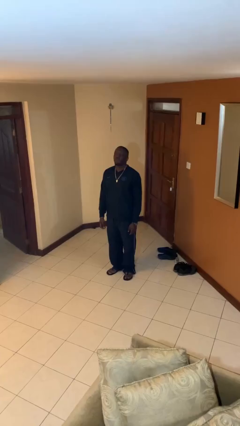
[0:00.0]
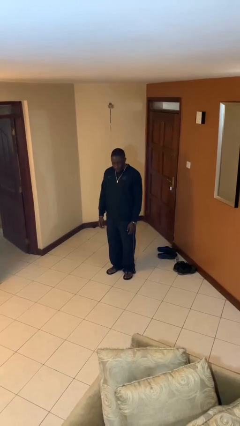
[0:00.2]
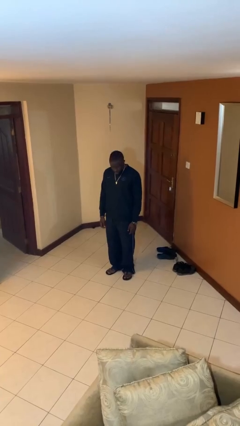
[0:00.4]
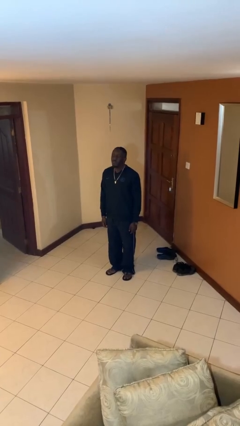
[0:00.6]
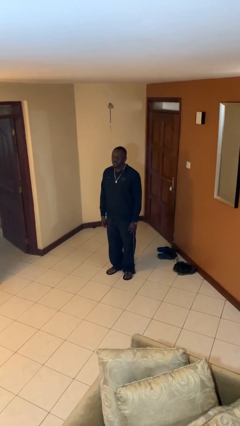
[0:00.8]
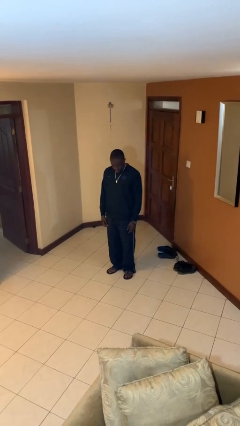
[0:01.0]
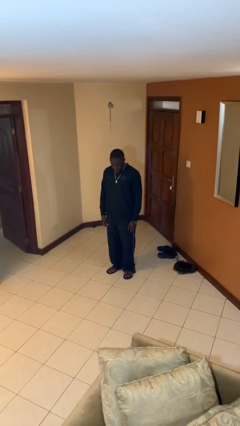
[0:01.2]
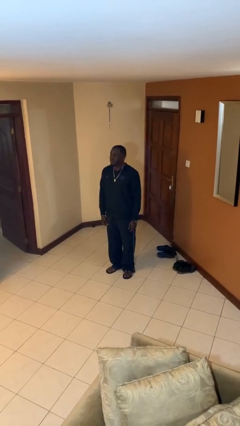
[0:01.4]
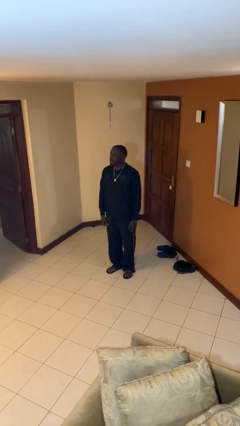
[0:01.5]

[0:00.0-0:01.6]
person nods head

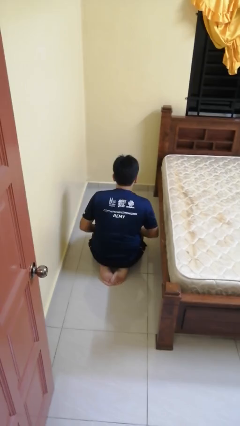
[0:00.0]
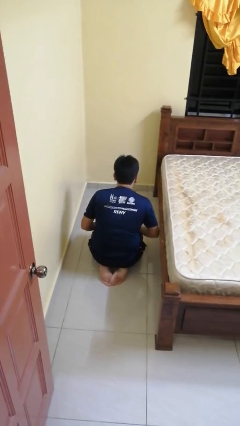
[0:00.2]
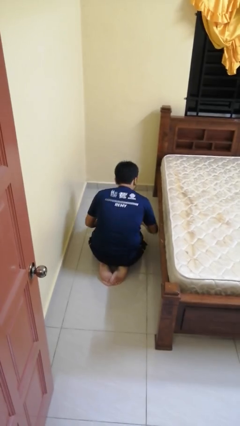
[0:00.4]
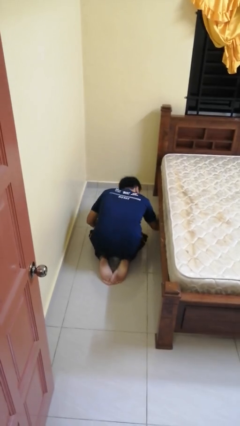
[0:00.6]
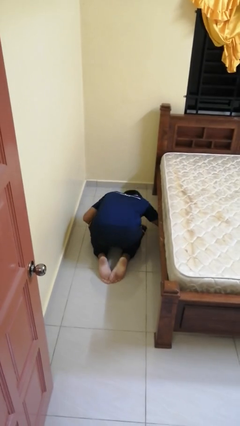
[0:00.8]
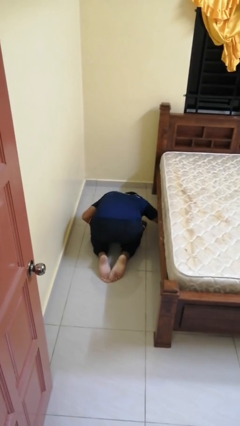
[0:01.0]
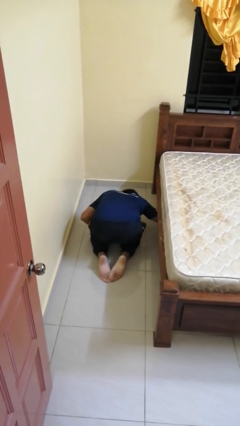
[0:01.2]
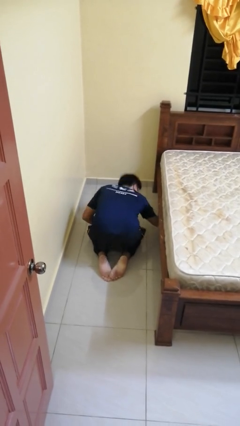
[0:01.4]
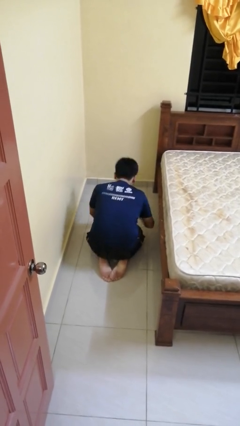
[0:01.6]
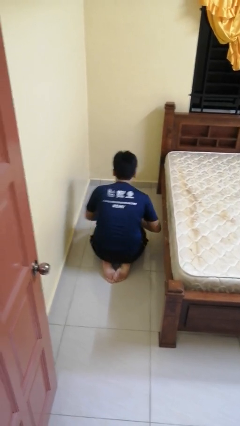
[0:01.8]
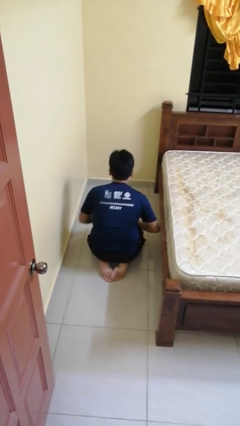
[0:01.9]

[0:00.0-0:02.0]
person searches under bed

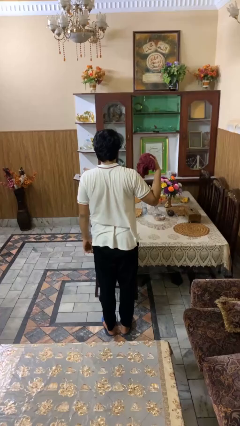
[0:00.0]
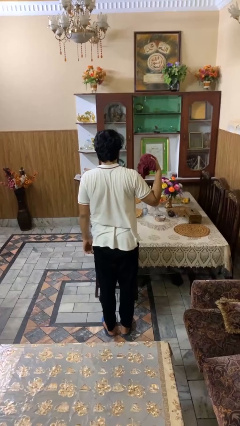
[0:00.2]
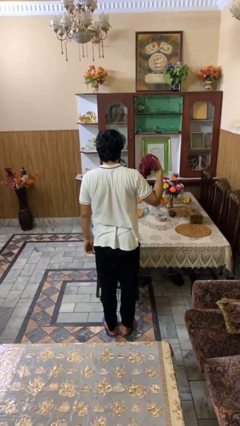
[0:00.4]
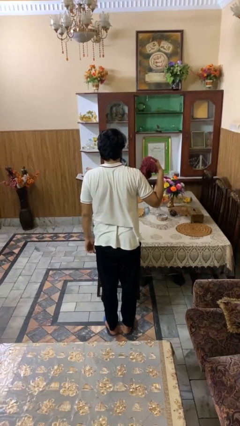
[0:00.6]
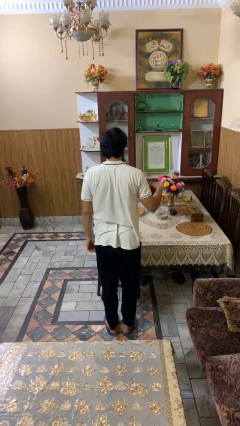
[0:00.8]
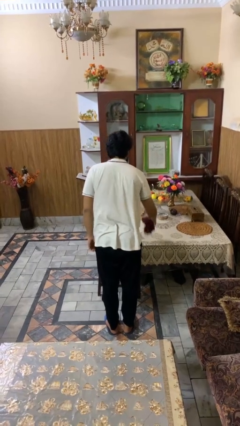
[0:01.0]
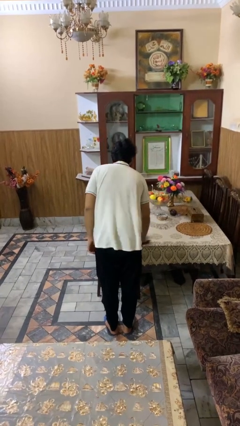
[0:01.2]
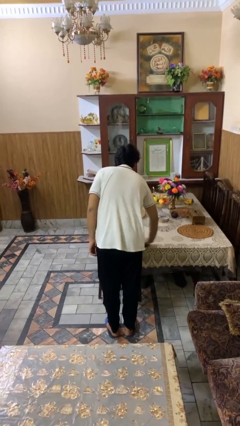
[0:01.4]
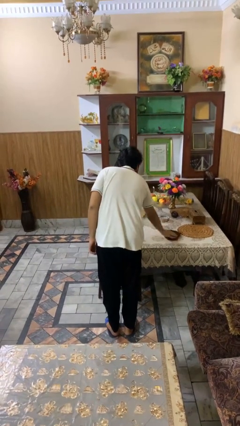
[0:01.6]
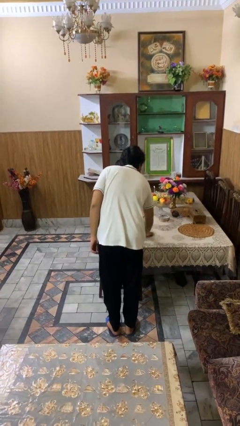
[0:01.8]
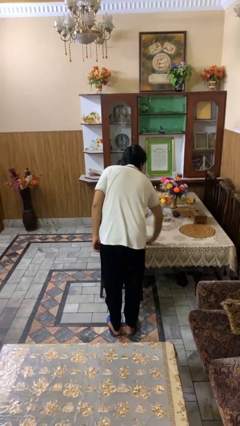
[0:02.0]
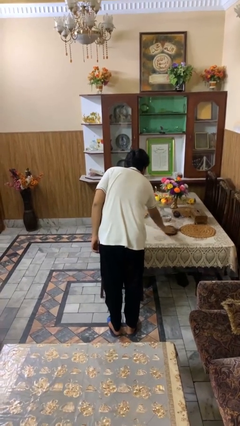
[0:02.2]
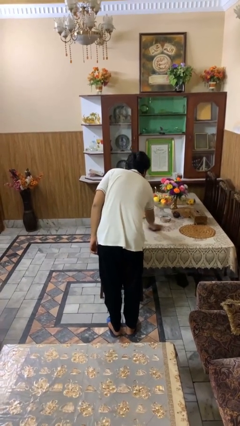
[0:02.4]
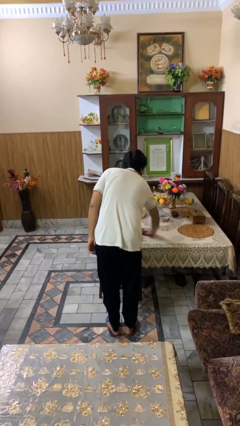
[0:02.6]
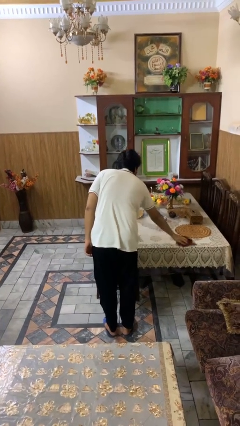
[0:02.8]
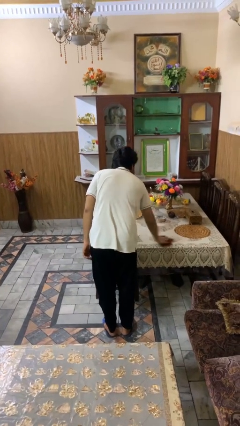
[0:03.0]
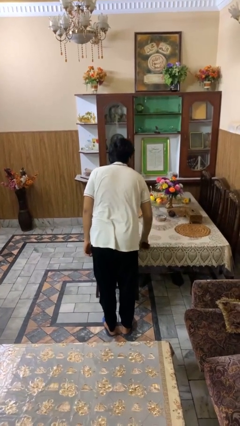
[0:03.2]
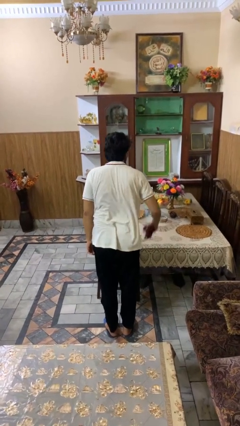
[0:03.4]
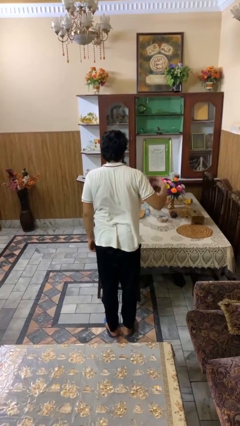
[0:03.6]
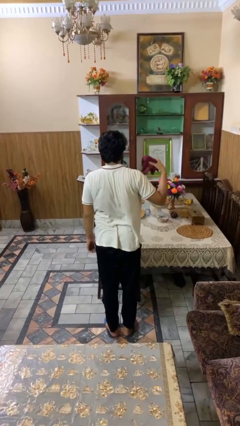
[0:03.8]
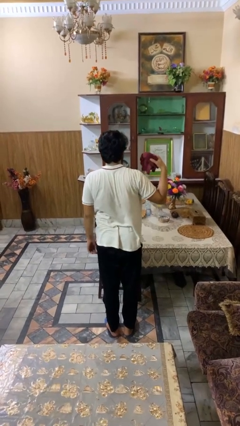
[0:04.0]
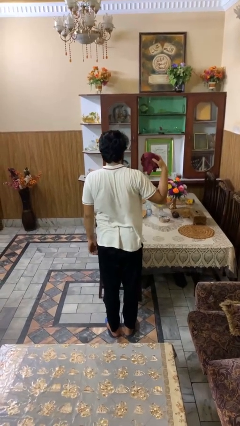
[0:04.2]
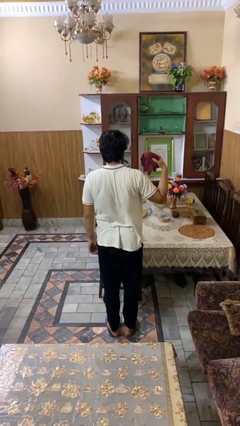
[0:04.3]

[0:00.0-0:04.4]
person cleans table with rag

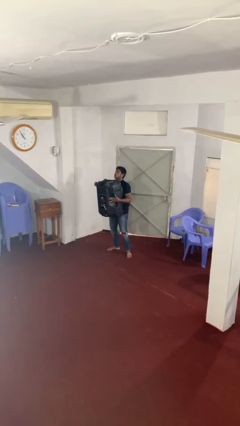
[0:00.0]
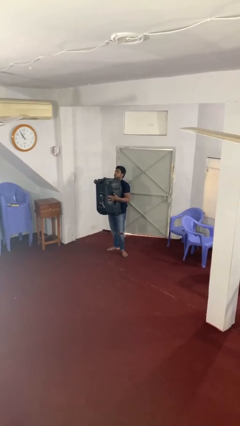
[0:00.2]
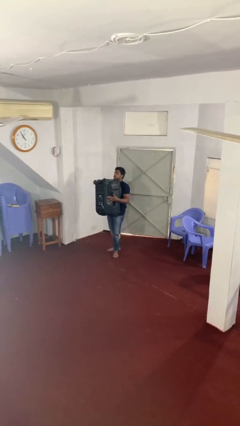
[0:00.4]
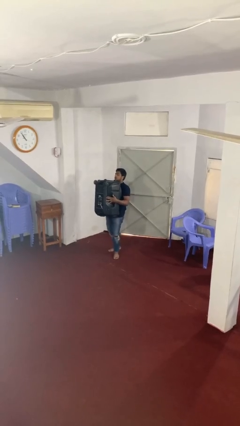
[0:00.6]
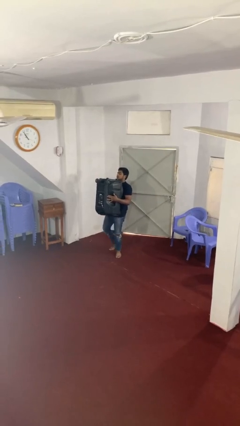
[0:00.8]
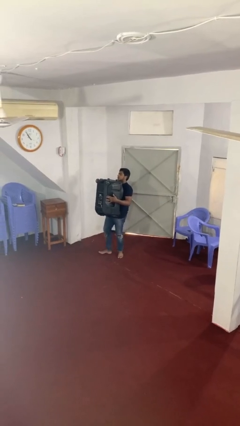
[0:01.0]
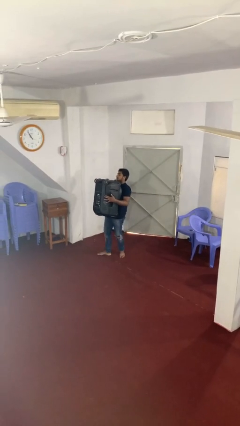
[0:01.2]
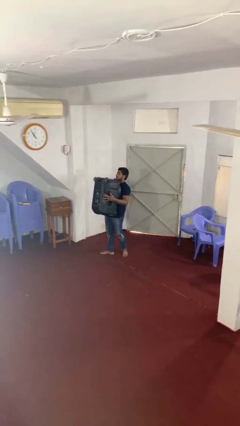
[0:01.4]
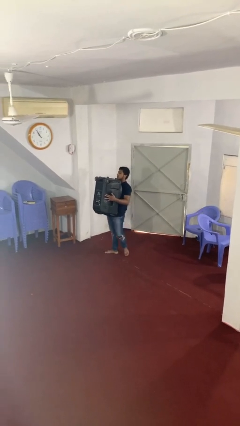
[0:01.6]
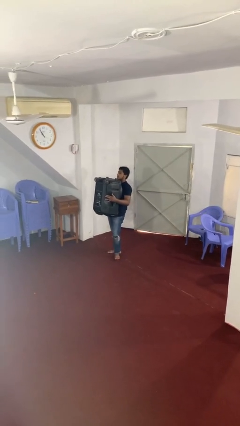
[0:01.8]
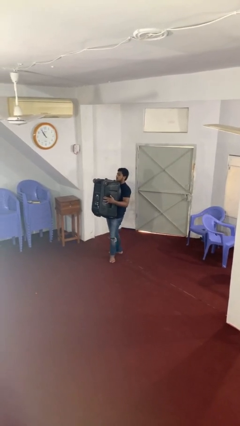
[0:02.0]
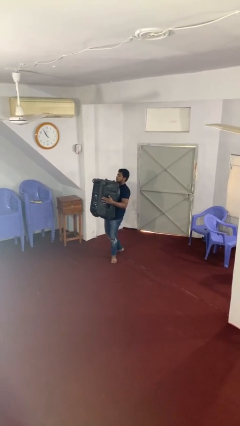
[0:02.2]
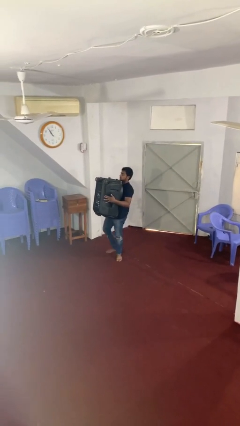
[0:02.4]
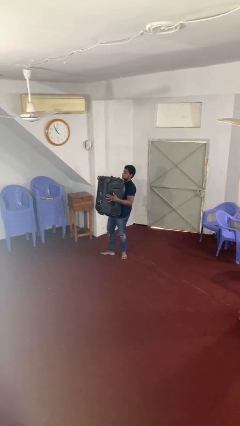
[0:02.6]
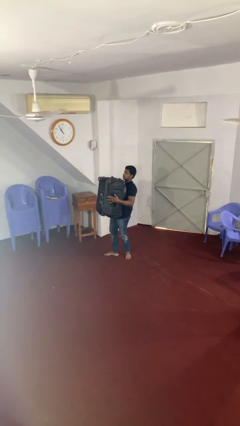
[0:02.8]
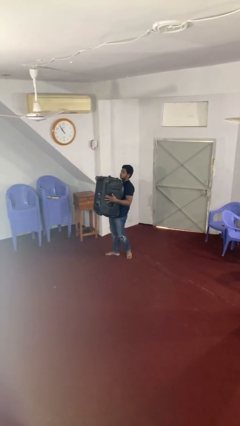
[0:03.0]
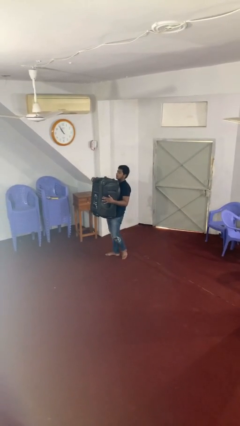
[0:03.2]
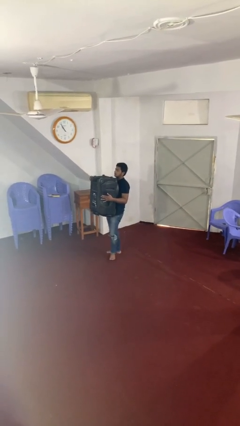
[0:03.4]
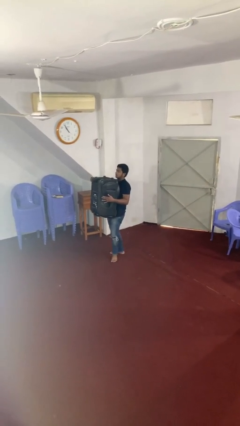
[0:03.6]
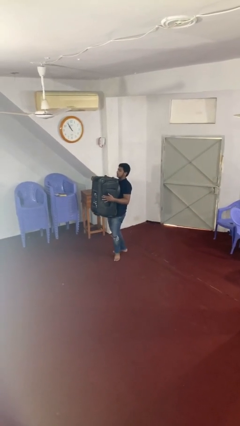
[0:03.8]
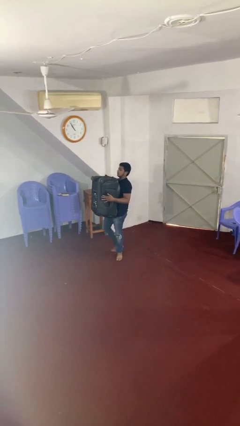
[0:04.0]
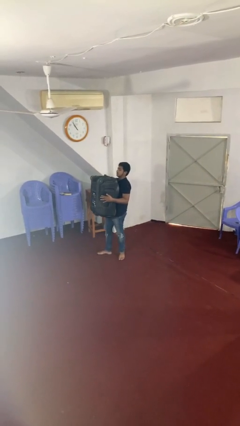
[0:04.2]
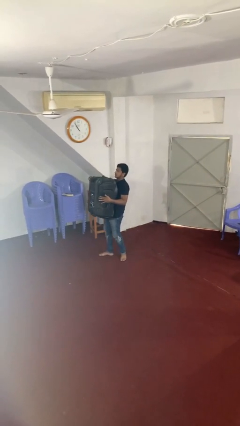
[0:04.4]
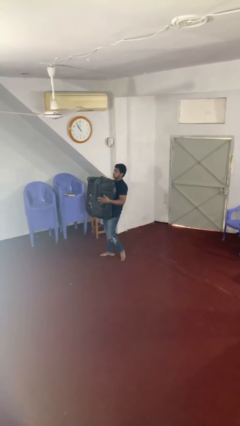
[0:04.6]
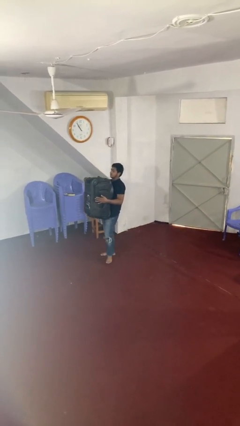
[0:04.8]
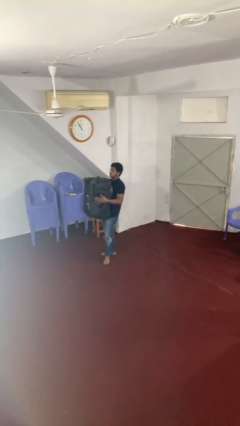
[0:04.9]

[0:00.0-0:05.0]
person carries heavy object

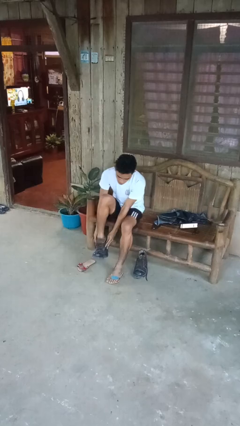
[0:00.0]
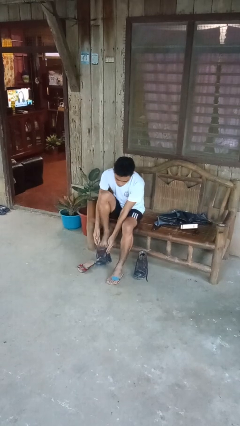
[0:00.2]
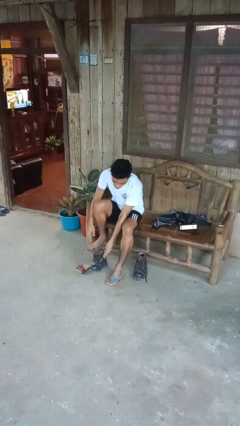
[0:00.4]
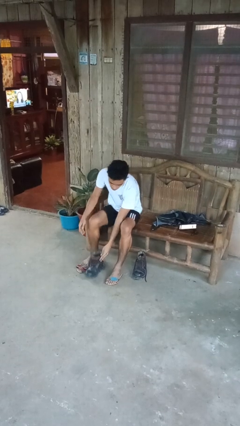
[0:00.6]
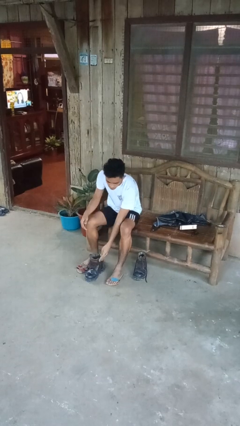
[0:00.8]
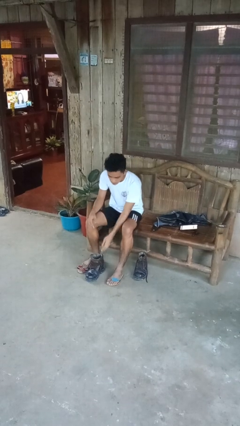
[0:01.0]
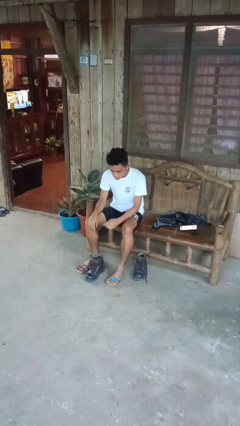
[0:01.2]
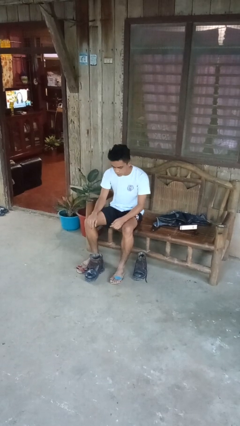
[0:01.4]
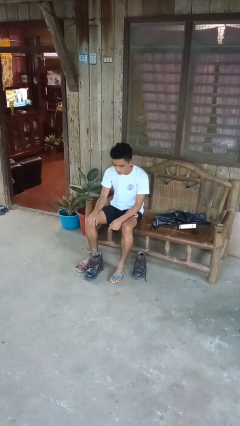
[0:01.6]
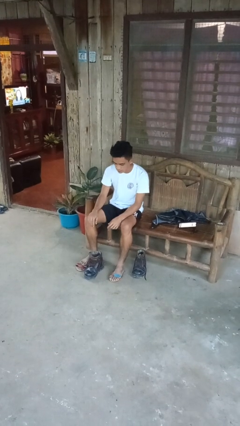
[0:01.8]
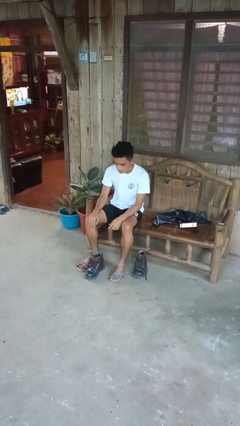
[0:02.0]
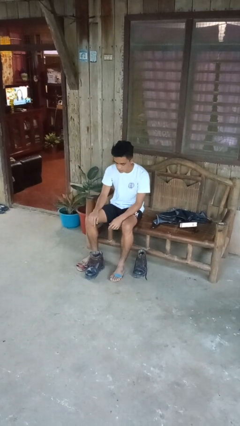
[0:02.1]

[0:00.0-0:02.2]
person takes off boots

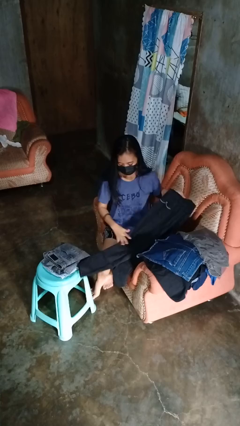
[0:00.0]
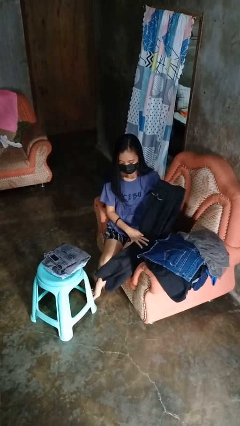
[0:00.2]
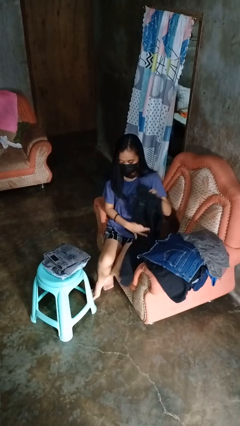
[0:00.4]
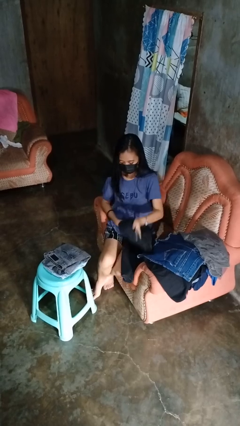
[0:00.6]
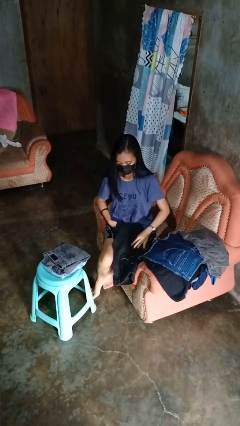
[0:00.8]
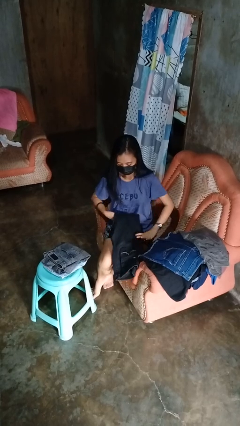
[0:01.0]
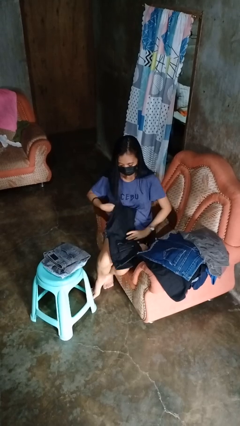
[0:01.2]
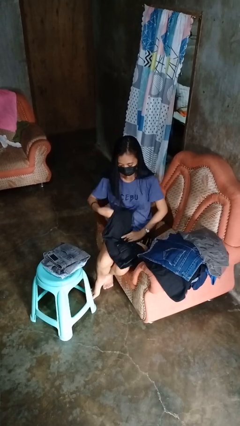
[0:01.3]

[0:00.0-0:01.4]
person folds pants

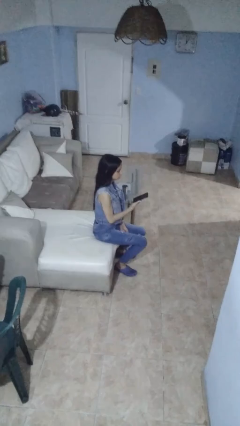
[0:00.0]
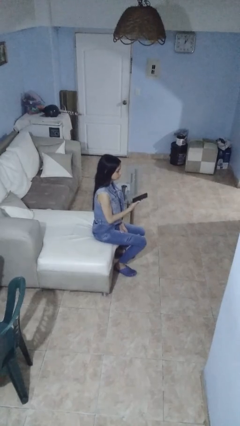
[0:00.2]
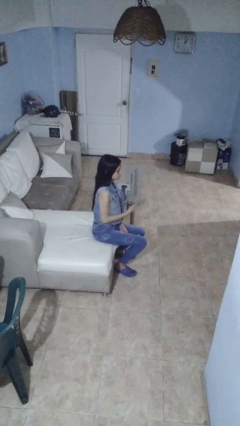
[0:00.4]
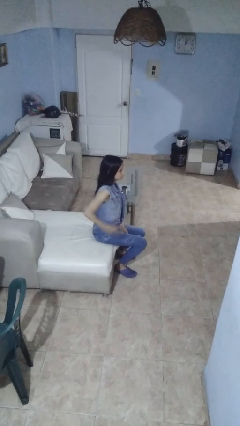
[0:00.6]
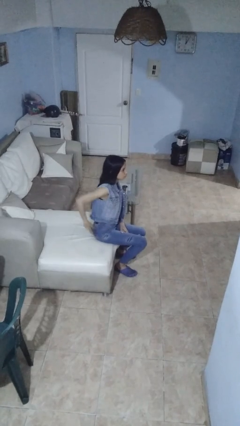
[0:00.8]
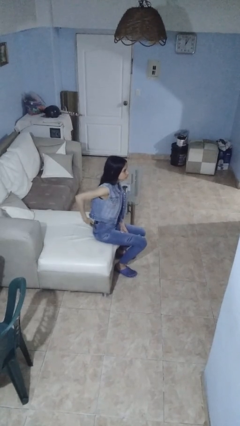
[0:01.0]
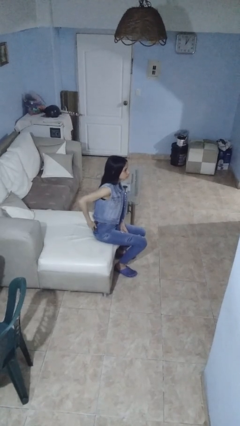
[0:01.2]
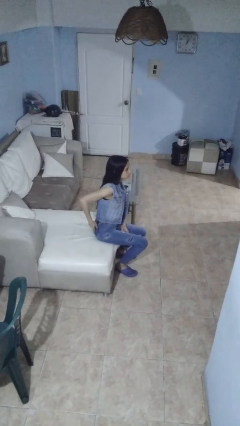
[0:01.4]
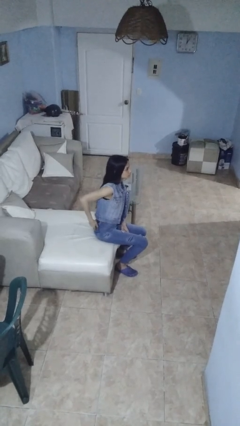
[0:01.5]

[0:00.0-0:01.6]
person puts phone into pocket
